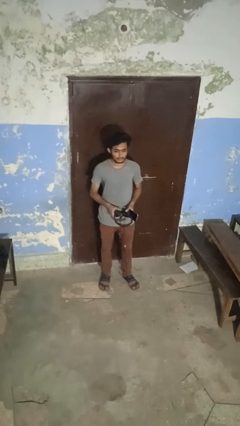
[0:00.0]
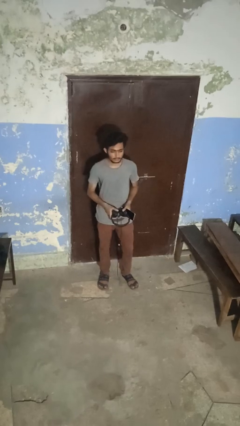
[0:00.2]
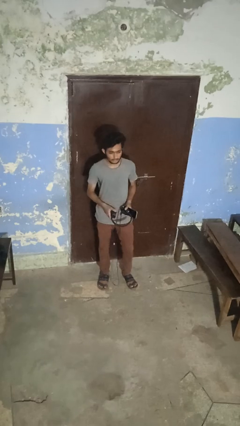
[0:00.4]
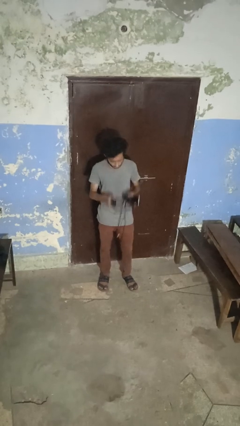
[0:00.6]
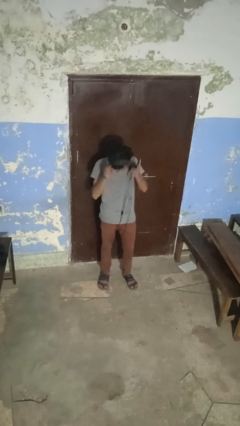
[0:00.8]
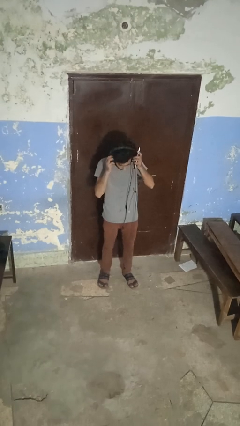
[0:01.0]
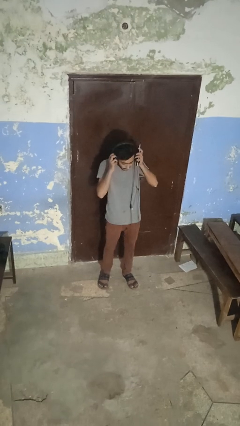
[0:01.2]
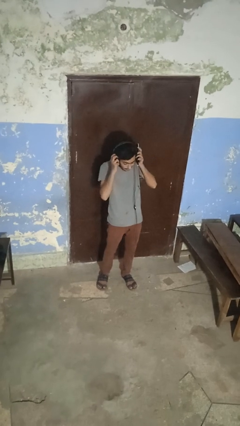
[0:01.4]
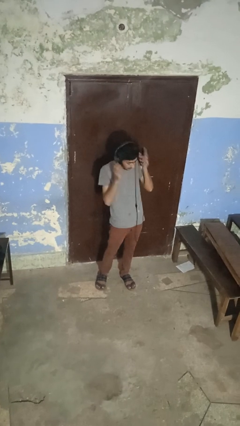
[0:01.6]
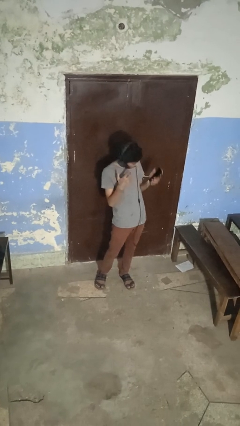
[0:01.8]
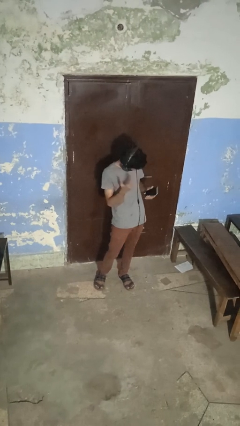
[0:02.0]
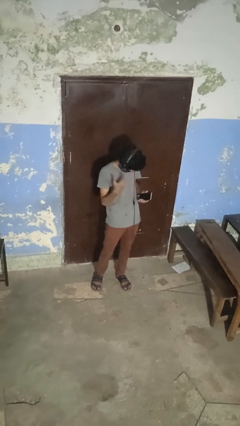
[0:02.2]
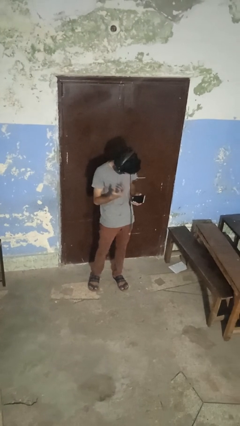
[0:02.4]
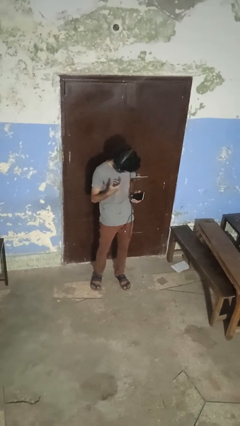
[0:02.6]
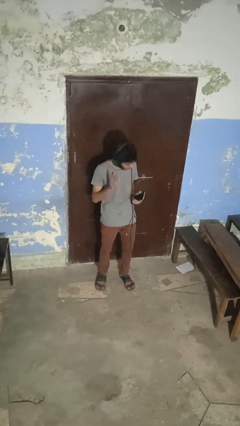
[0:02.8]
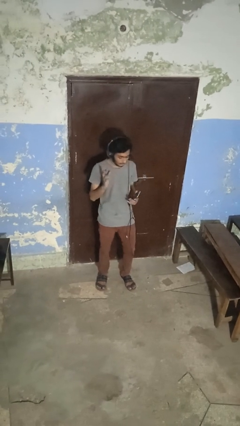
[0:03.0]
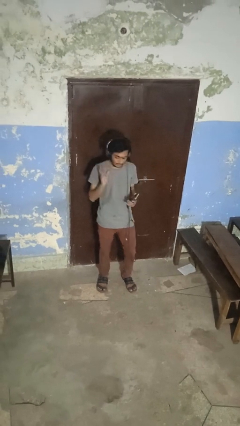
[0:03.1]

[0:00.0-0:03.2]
person puts on headphones

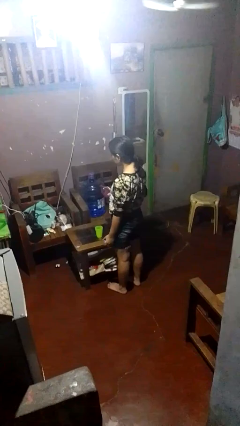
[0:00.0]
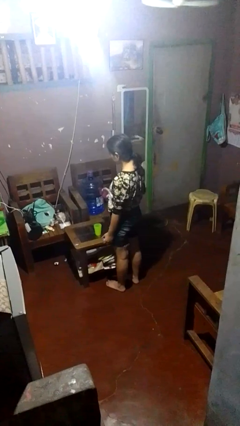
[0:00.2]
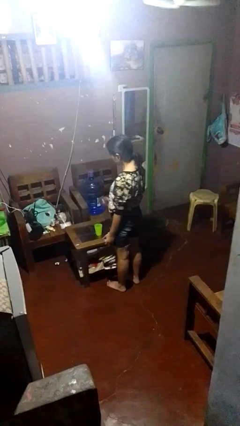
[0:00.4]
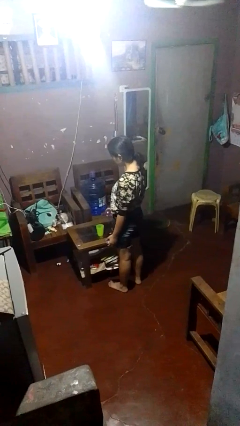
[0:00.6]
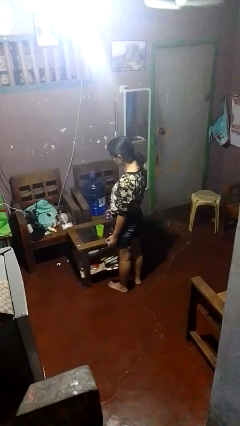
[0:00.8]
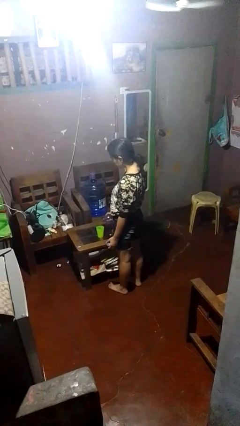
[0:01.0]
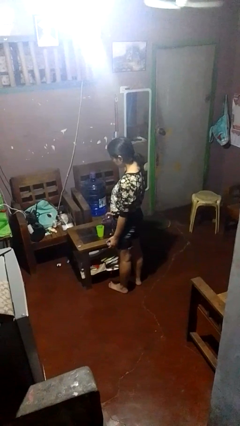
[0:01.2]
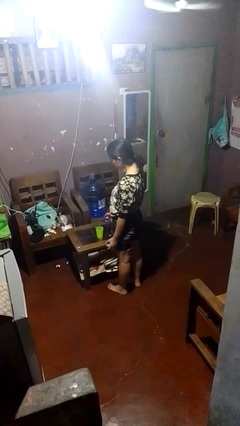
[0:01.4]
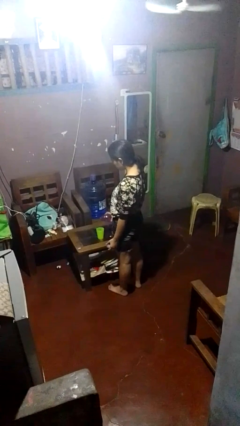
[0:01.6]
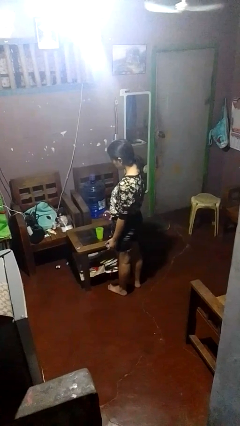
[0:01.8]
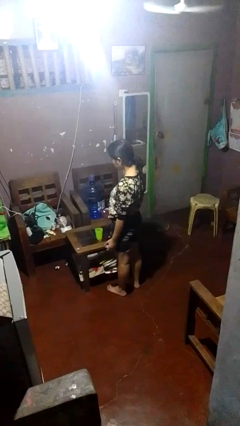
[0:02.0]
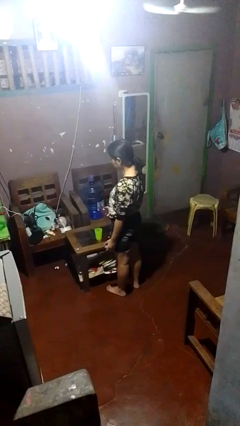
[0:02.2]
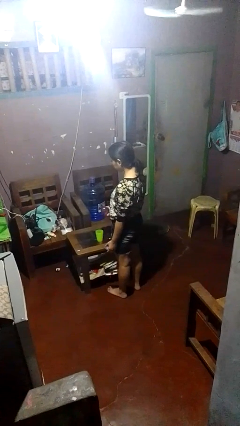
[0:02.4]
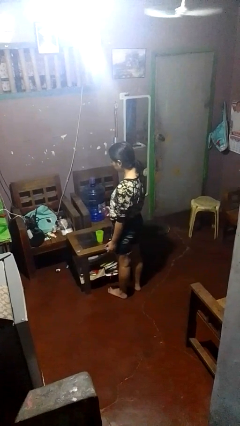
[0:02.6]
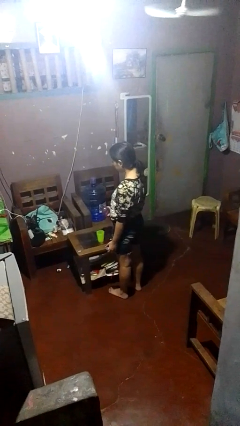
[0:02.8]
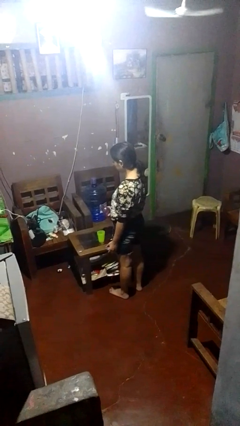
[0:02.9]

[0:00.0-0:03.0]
person pours liquid into cup

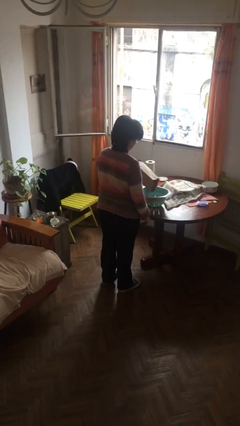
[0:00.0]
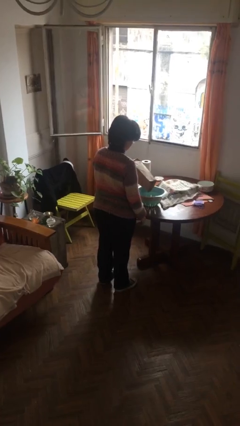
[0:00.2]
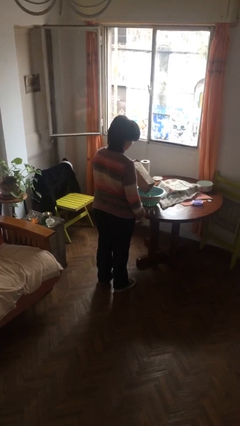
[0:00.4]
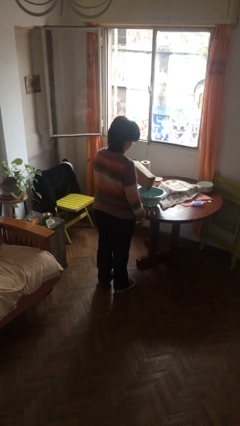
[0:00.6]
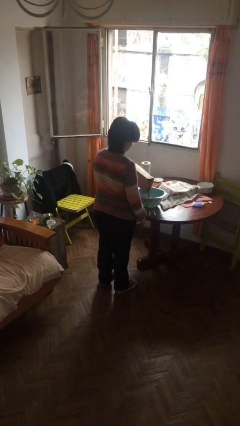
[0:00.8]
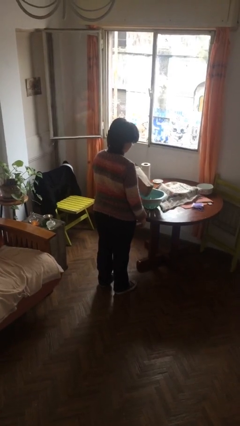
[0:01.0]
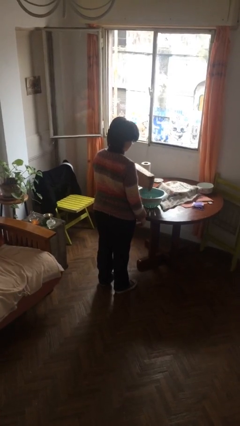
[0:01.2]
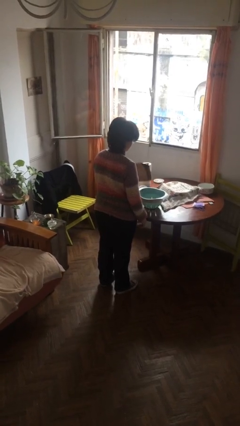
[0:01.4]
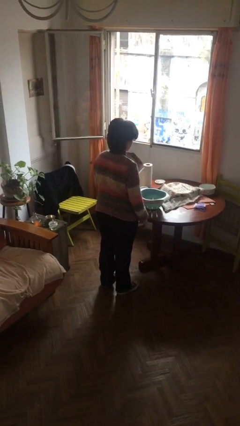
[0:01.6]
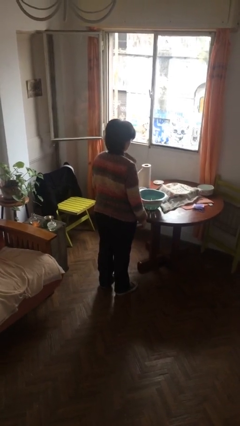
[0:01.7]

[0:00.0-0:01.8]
person pours into bowl

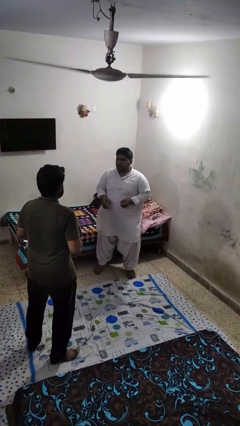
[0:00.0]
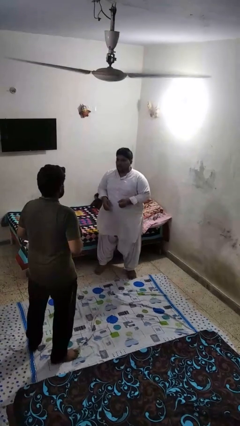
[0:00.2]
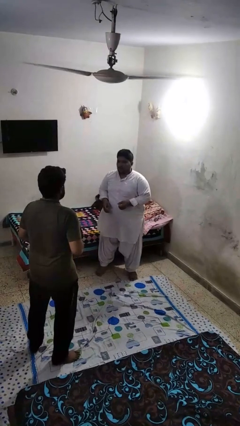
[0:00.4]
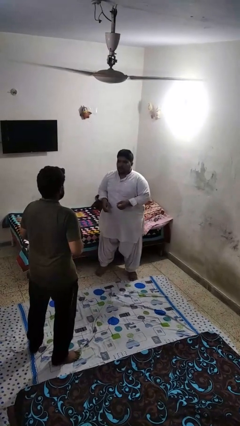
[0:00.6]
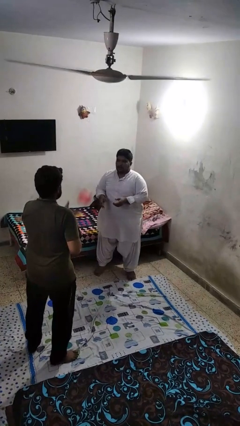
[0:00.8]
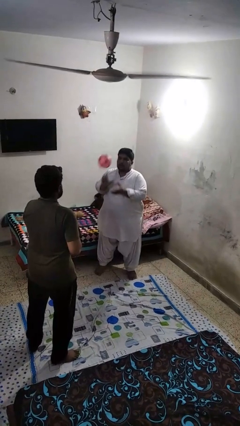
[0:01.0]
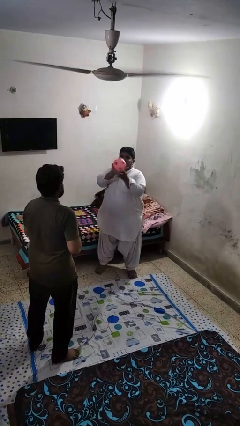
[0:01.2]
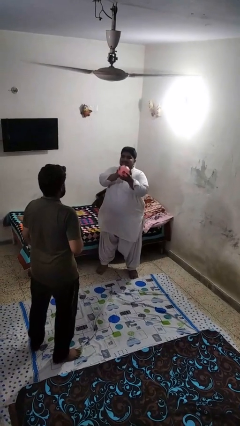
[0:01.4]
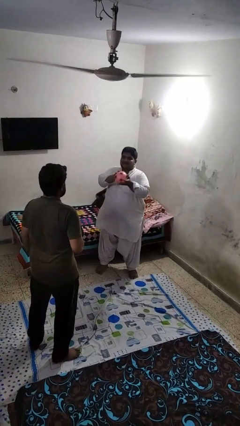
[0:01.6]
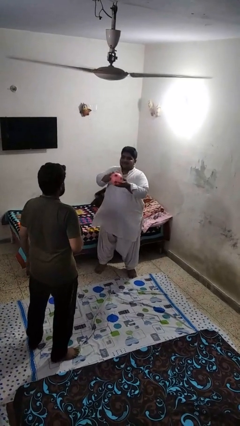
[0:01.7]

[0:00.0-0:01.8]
person catches object from person

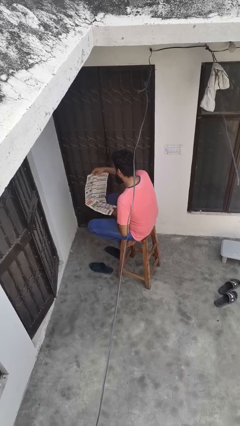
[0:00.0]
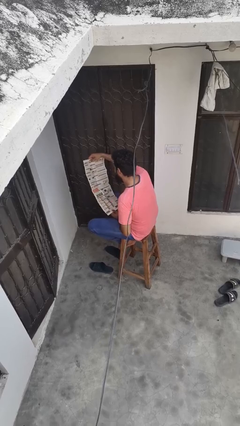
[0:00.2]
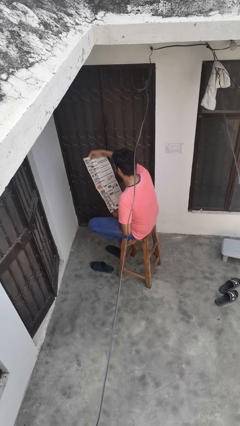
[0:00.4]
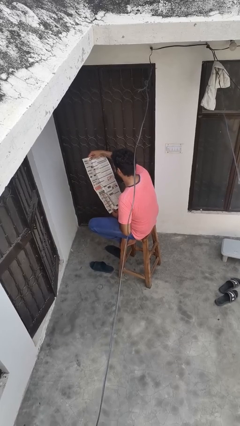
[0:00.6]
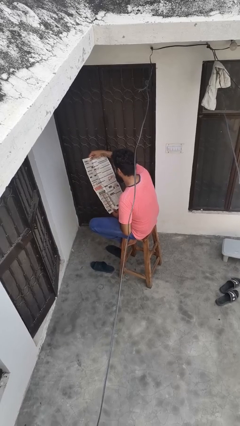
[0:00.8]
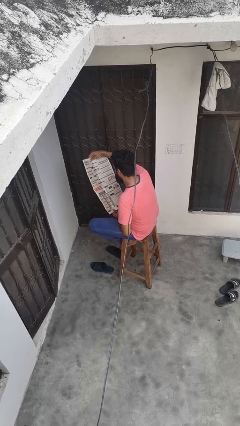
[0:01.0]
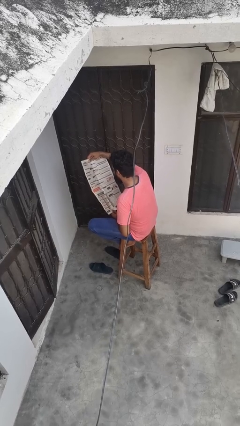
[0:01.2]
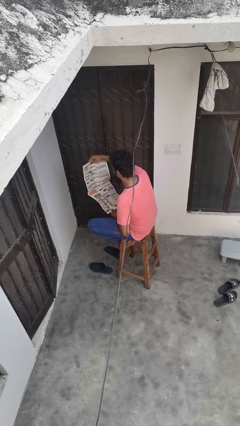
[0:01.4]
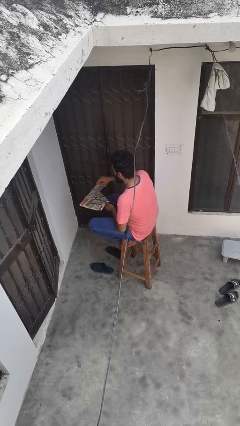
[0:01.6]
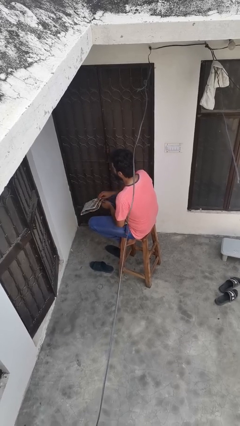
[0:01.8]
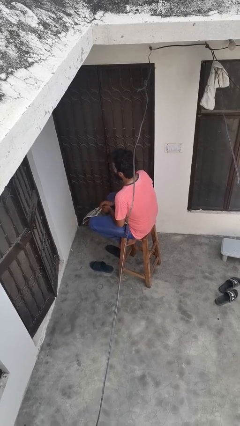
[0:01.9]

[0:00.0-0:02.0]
person reads newspaper

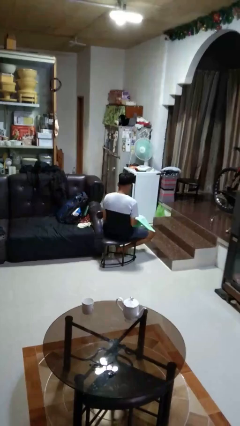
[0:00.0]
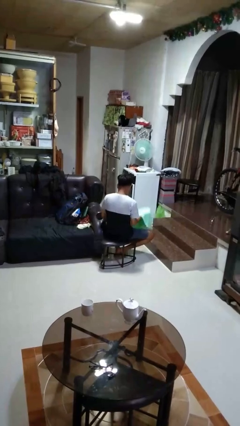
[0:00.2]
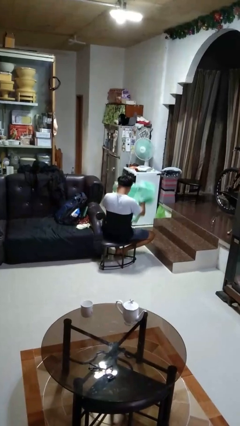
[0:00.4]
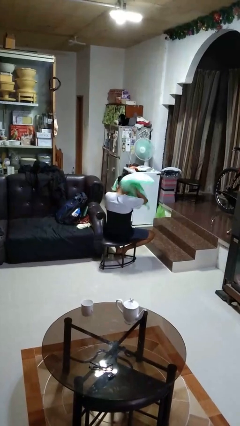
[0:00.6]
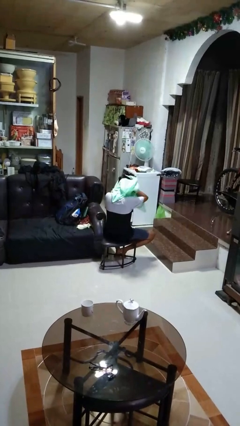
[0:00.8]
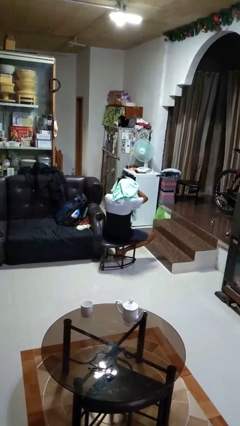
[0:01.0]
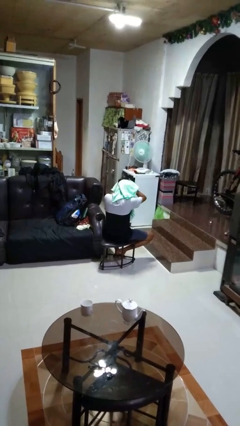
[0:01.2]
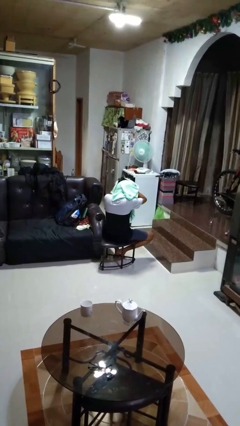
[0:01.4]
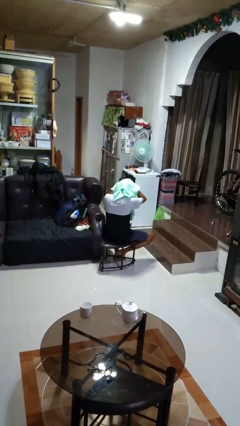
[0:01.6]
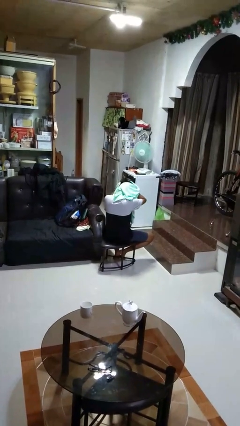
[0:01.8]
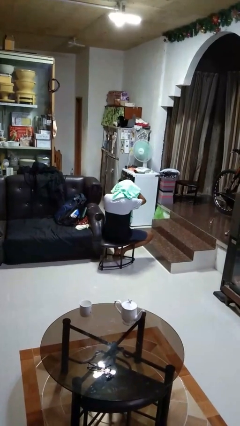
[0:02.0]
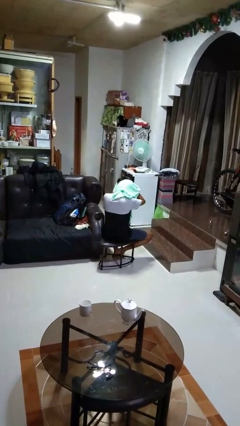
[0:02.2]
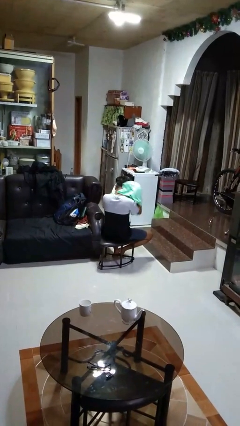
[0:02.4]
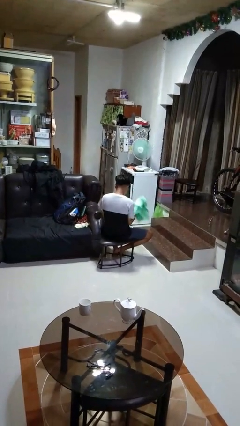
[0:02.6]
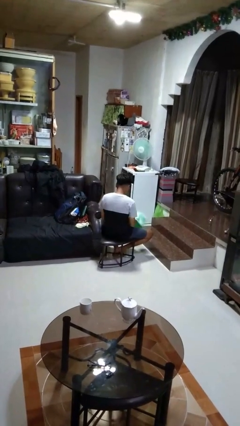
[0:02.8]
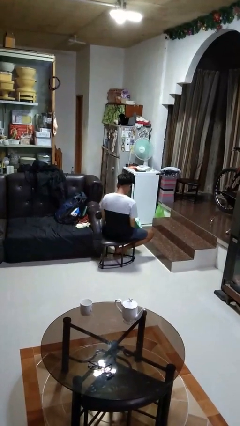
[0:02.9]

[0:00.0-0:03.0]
person dries hair with towel

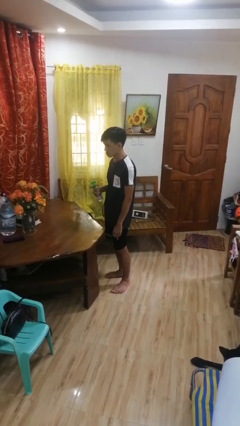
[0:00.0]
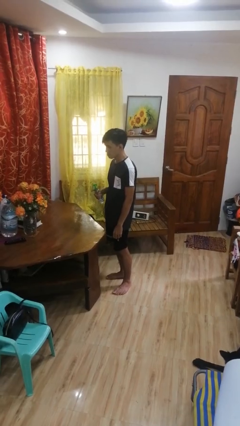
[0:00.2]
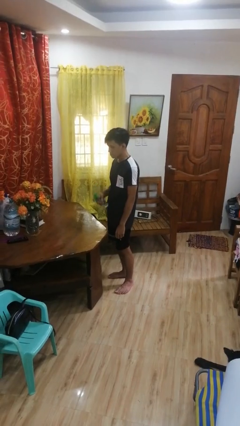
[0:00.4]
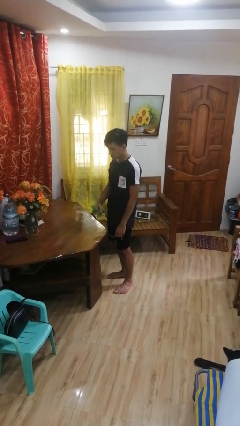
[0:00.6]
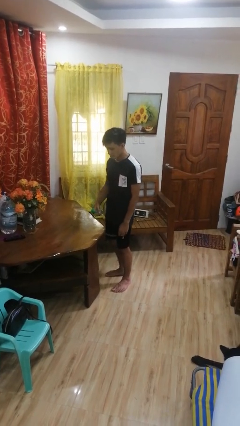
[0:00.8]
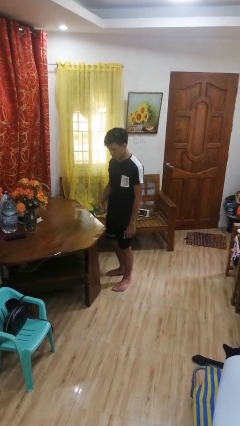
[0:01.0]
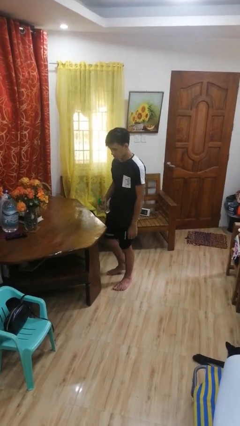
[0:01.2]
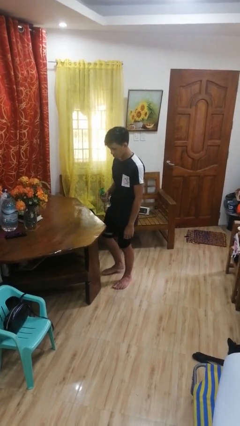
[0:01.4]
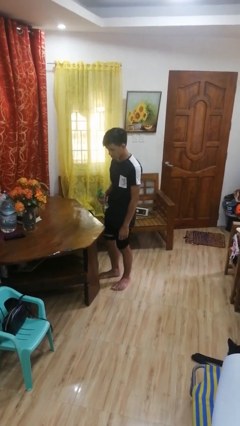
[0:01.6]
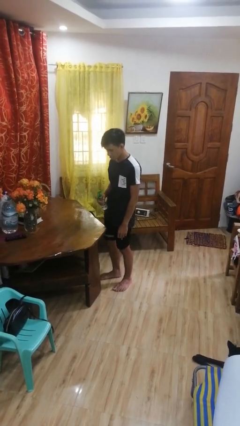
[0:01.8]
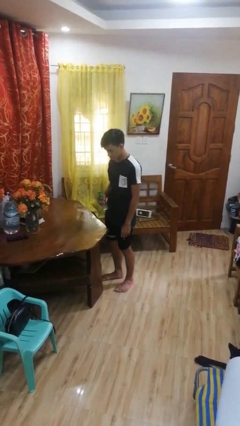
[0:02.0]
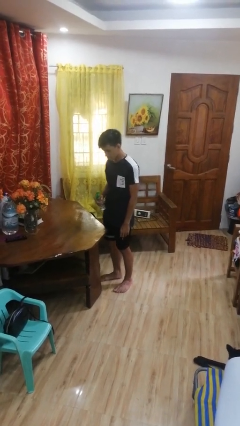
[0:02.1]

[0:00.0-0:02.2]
person sprays from bottle

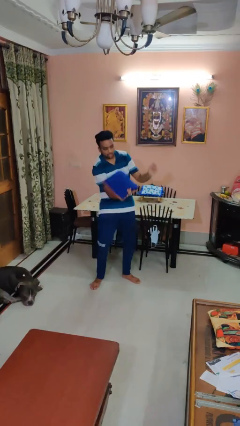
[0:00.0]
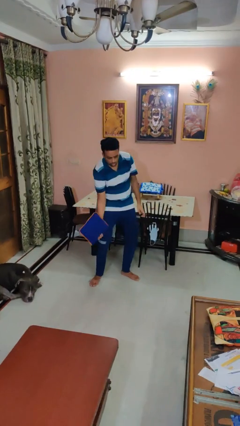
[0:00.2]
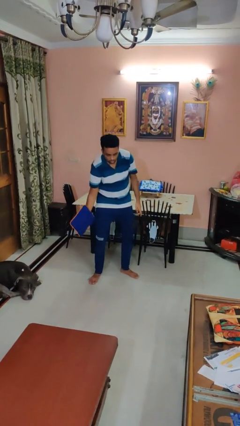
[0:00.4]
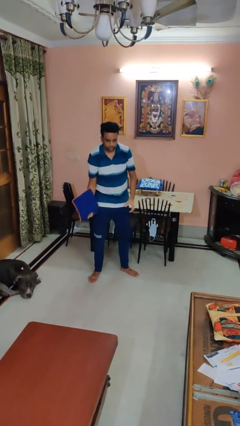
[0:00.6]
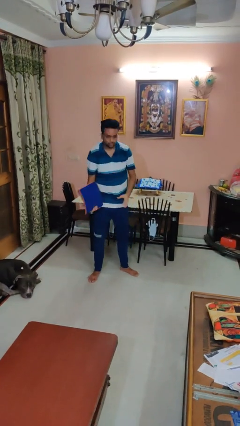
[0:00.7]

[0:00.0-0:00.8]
person catches dropped object
